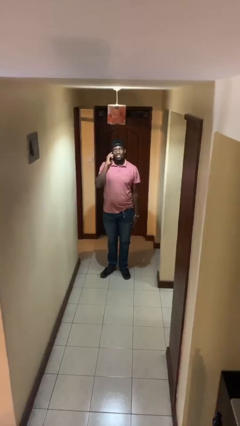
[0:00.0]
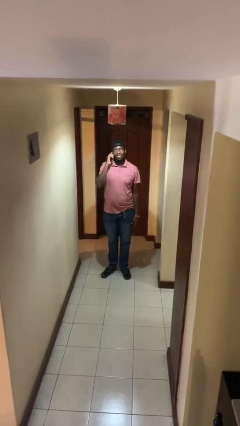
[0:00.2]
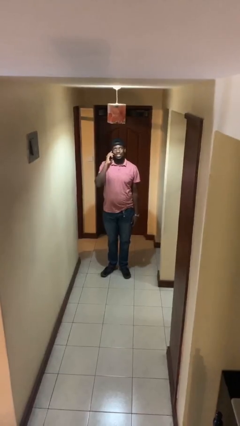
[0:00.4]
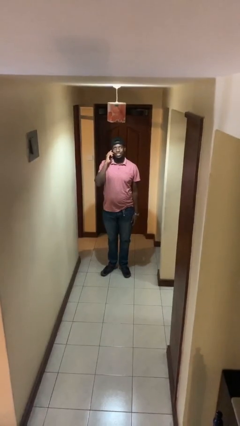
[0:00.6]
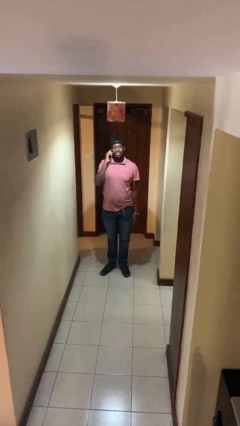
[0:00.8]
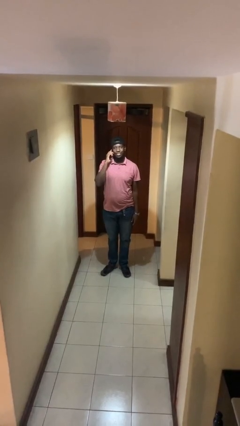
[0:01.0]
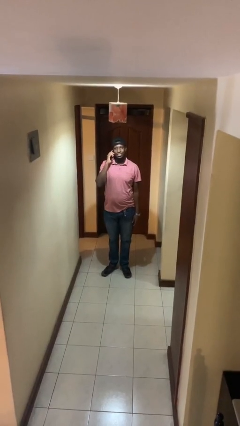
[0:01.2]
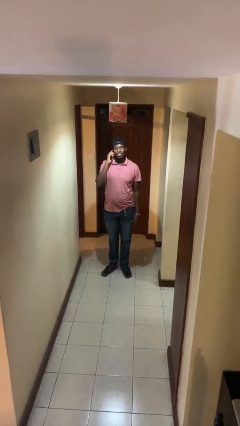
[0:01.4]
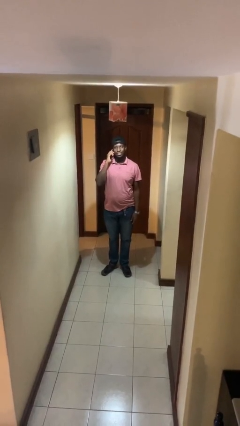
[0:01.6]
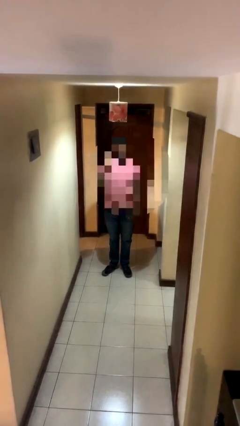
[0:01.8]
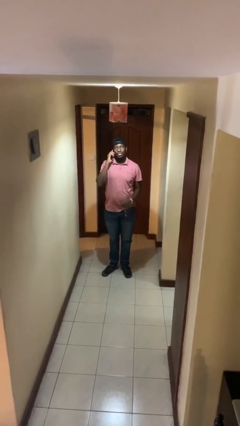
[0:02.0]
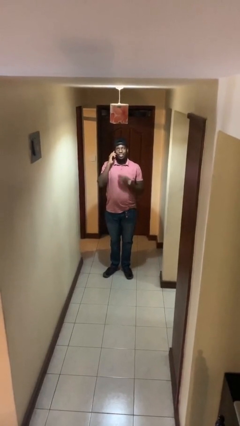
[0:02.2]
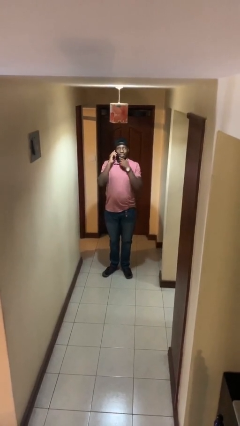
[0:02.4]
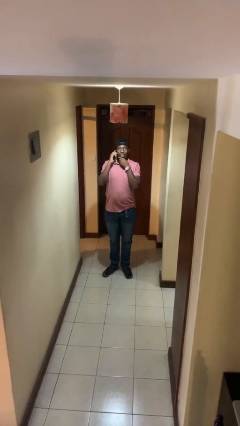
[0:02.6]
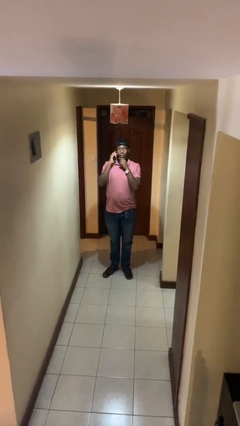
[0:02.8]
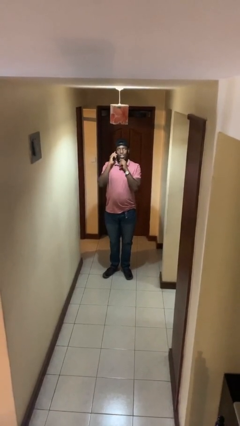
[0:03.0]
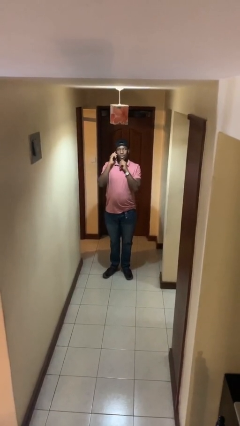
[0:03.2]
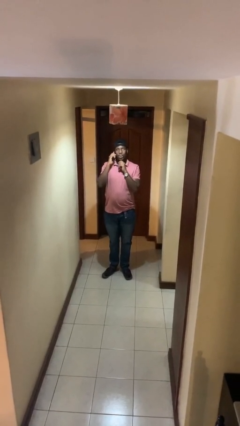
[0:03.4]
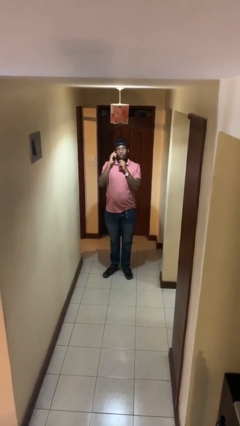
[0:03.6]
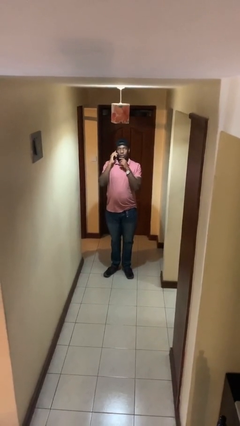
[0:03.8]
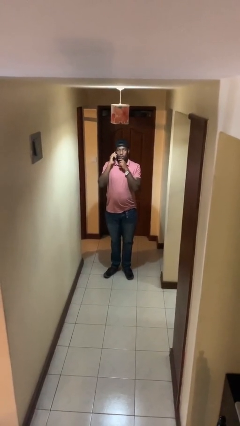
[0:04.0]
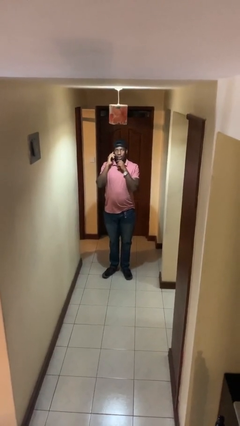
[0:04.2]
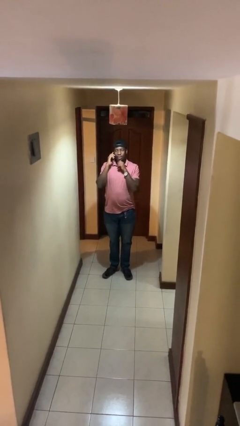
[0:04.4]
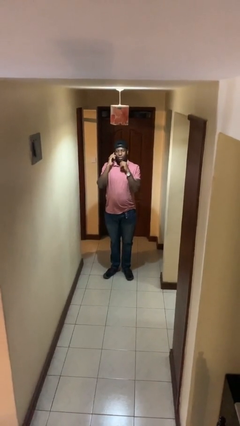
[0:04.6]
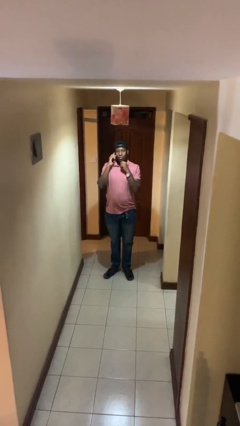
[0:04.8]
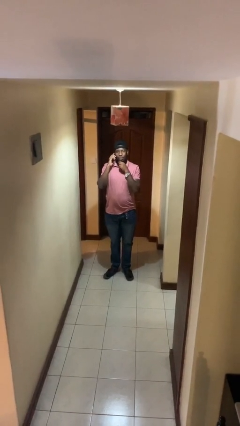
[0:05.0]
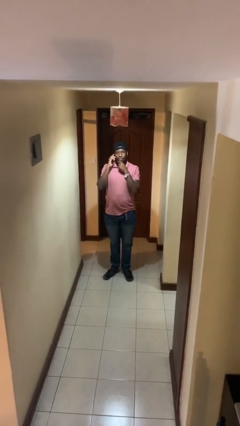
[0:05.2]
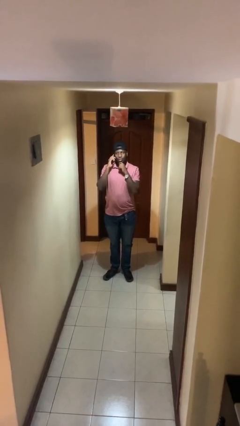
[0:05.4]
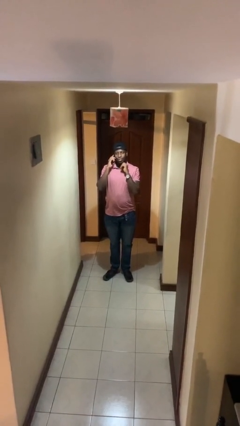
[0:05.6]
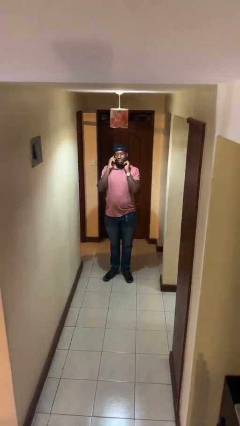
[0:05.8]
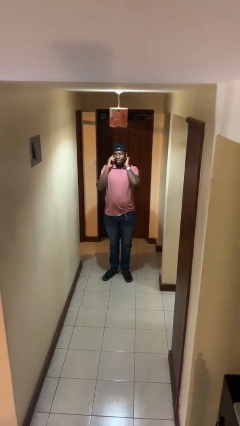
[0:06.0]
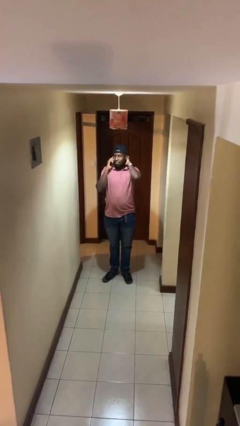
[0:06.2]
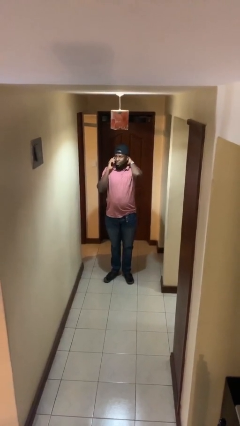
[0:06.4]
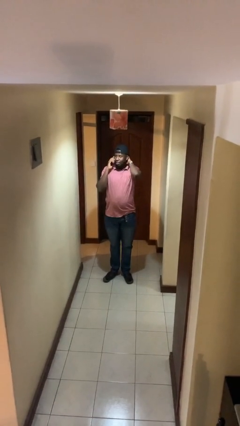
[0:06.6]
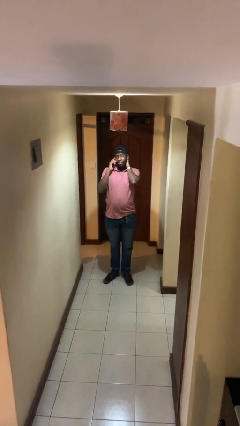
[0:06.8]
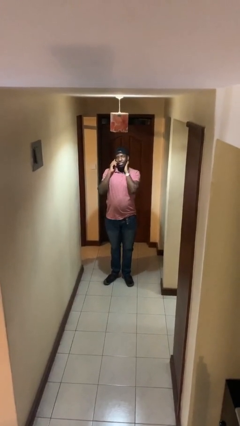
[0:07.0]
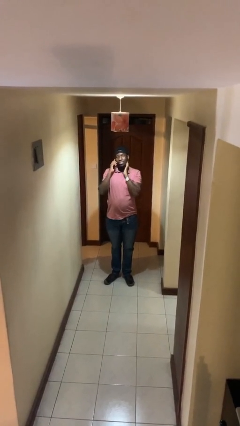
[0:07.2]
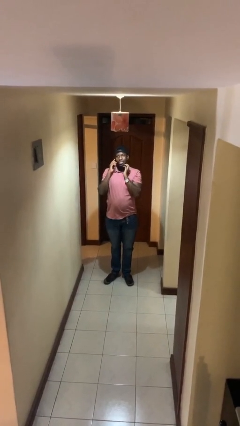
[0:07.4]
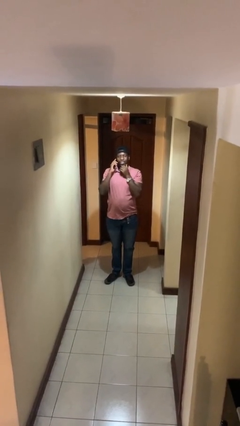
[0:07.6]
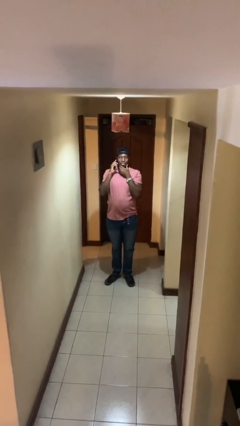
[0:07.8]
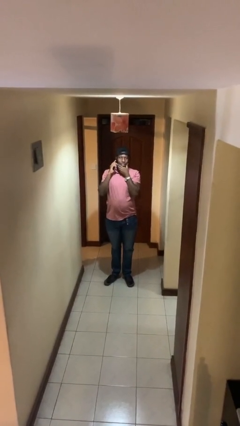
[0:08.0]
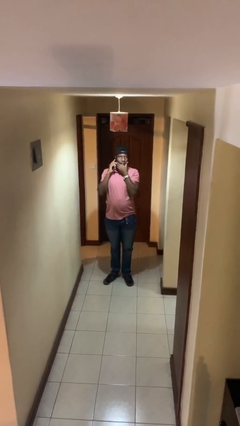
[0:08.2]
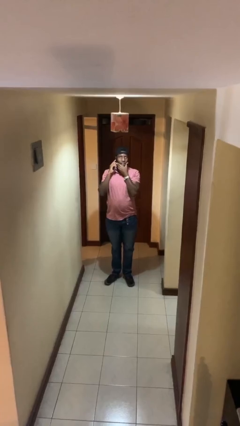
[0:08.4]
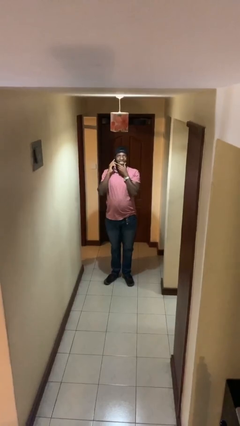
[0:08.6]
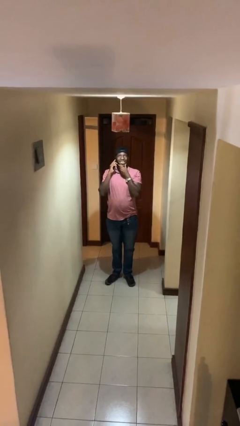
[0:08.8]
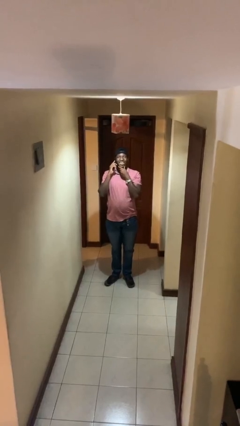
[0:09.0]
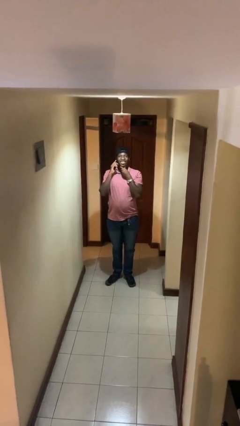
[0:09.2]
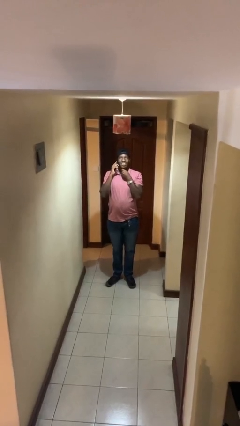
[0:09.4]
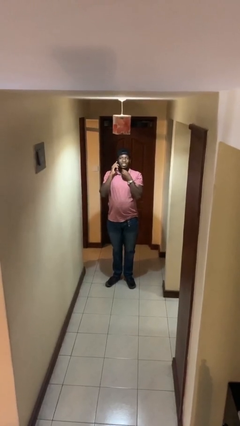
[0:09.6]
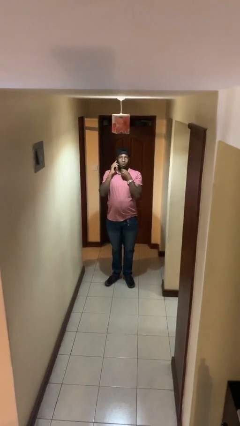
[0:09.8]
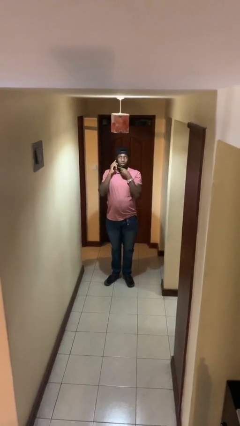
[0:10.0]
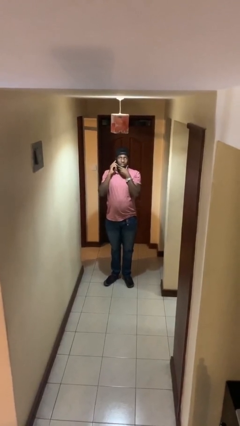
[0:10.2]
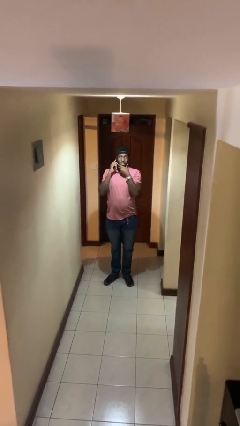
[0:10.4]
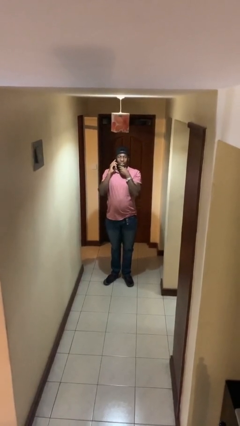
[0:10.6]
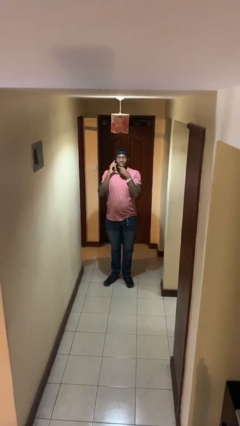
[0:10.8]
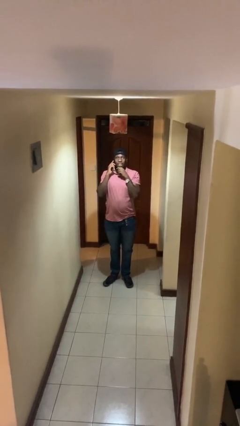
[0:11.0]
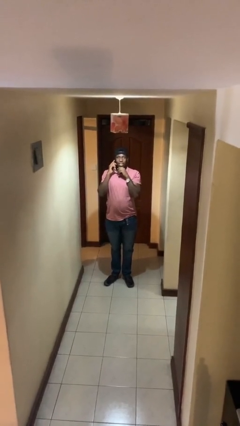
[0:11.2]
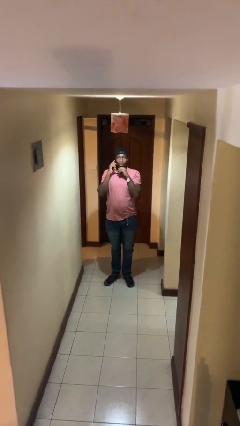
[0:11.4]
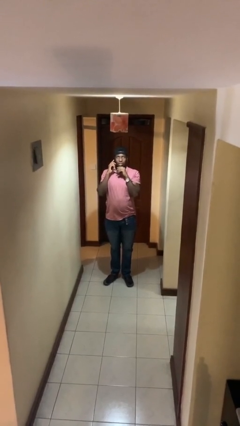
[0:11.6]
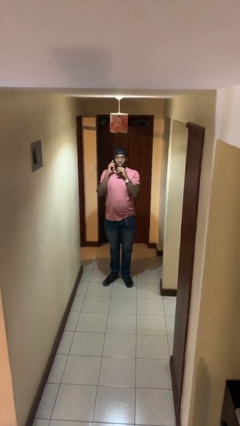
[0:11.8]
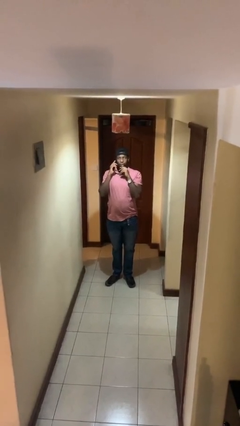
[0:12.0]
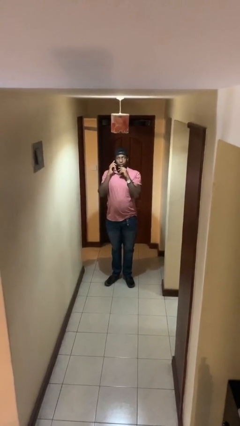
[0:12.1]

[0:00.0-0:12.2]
person talks on phone

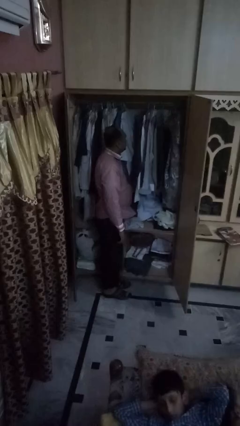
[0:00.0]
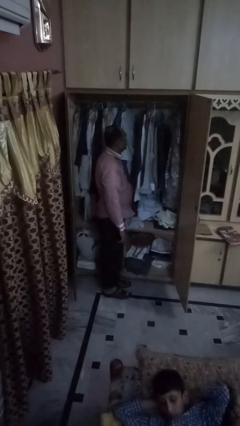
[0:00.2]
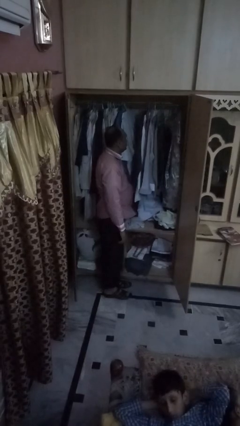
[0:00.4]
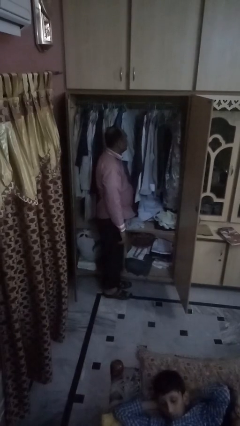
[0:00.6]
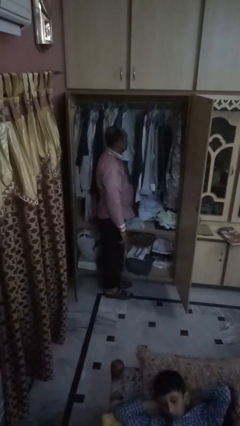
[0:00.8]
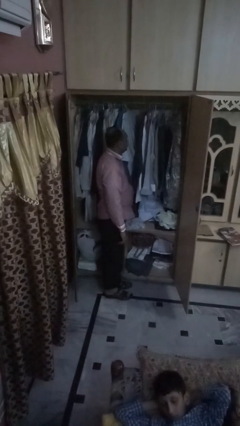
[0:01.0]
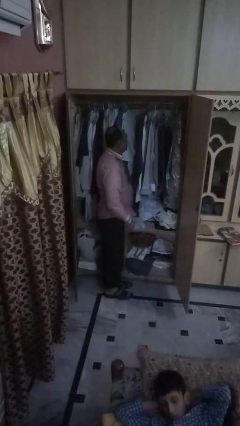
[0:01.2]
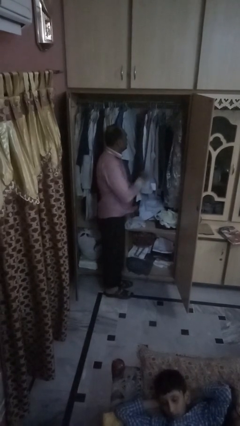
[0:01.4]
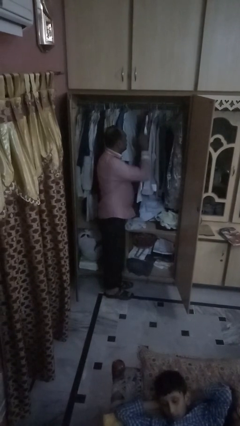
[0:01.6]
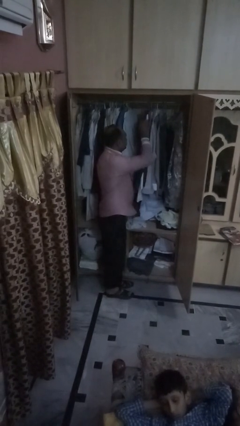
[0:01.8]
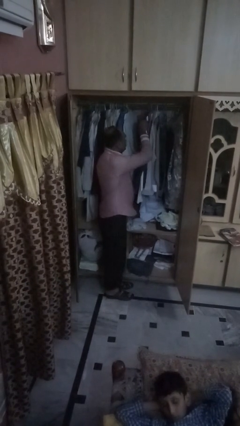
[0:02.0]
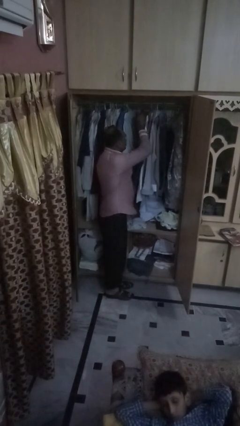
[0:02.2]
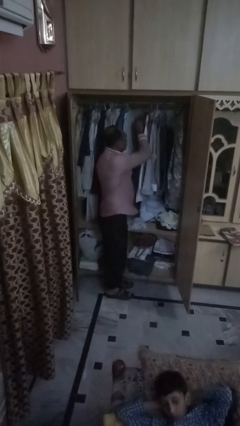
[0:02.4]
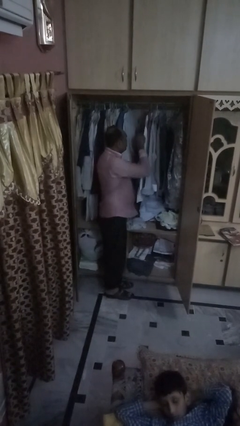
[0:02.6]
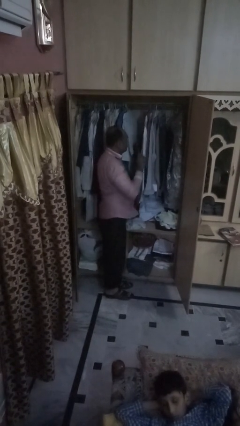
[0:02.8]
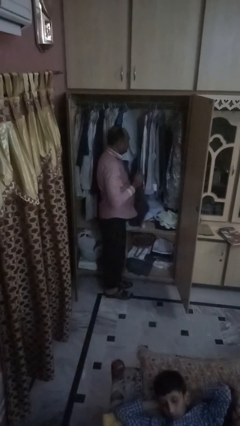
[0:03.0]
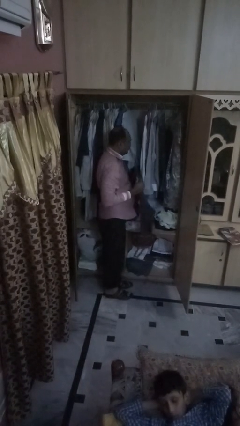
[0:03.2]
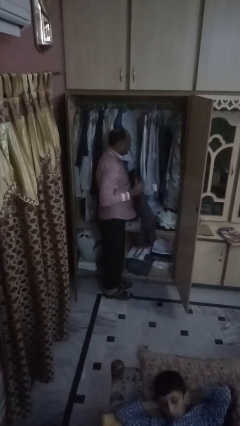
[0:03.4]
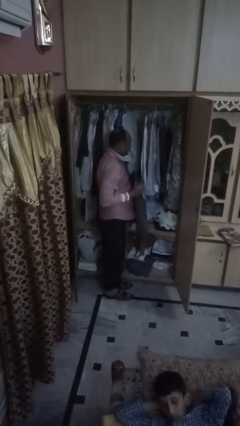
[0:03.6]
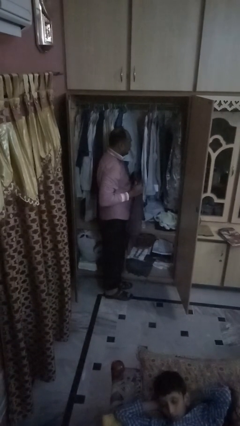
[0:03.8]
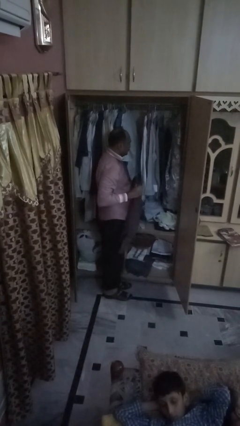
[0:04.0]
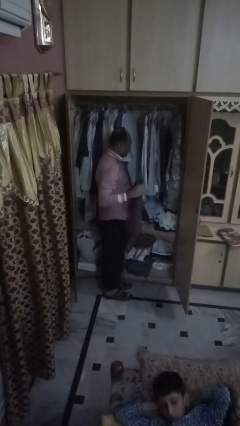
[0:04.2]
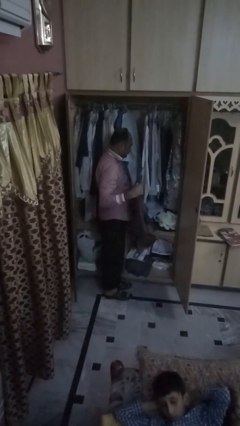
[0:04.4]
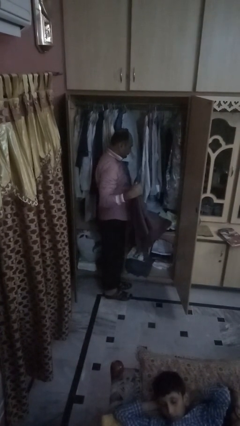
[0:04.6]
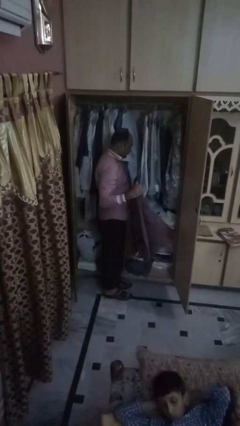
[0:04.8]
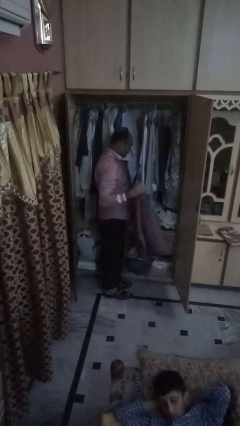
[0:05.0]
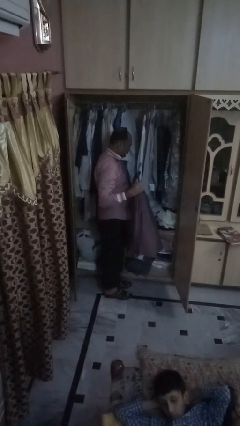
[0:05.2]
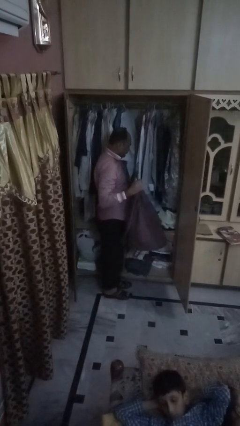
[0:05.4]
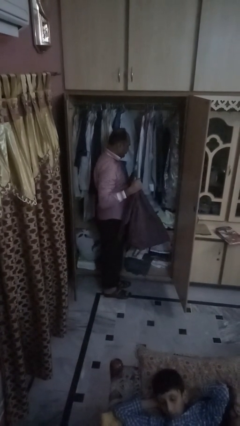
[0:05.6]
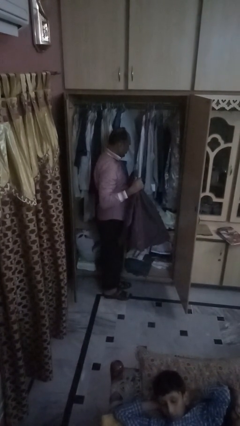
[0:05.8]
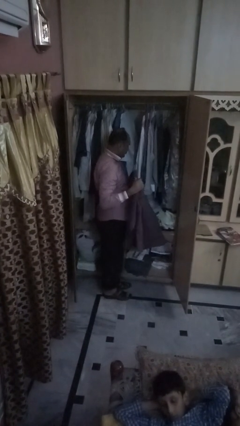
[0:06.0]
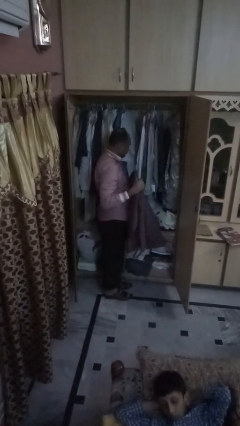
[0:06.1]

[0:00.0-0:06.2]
person puts clothes into closet

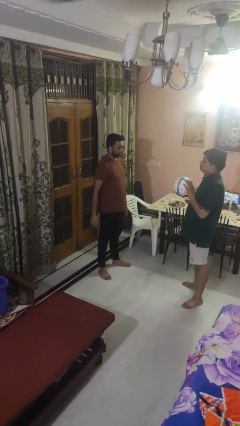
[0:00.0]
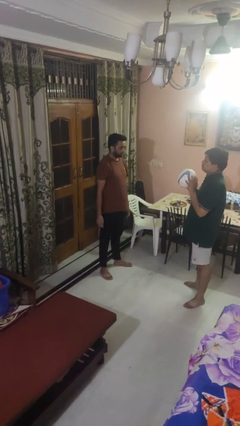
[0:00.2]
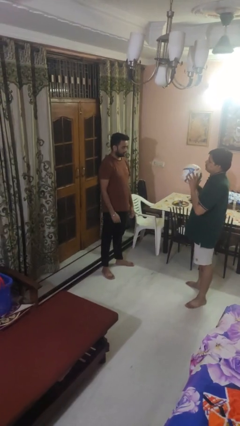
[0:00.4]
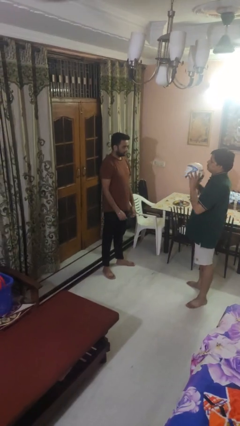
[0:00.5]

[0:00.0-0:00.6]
person throws object to person
